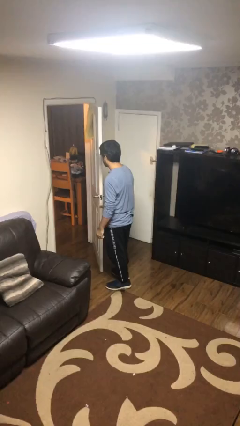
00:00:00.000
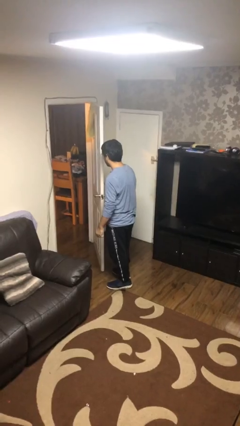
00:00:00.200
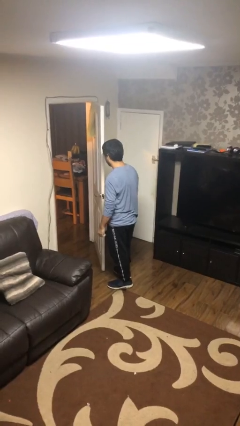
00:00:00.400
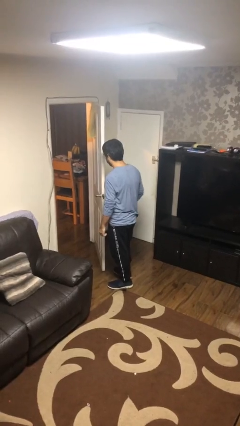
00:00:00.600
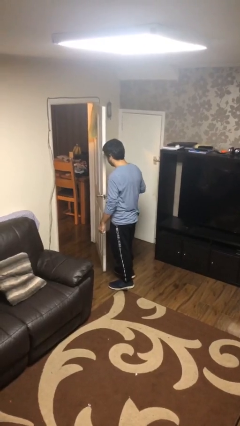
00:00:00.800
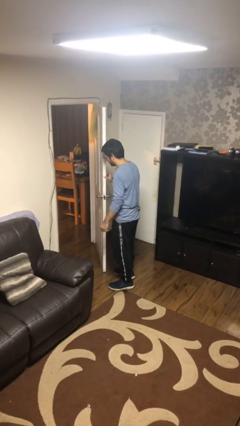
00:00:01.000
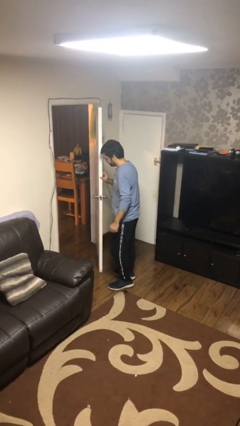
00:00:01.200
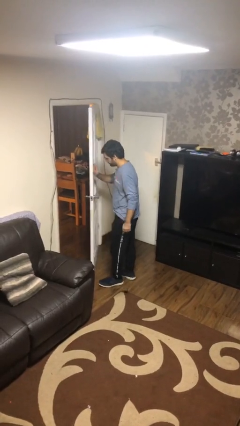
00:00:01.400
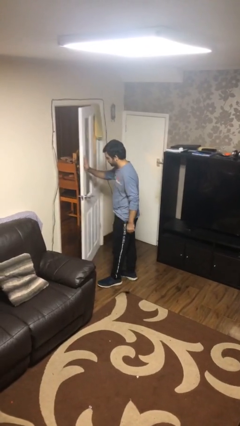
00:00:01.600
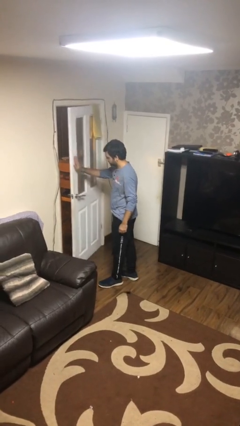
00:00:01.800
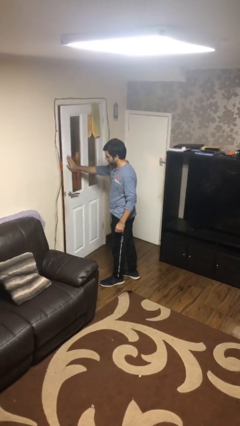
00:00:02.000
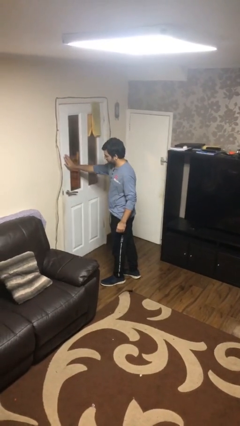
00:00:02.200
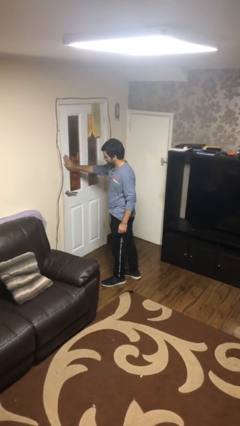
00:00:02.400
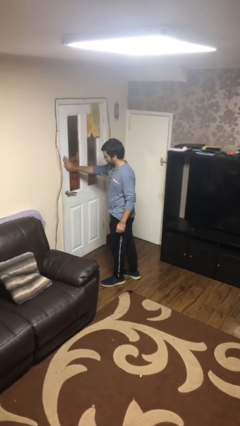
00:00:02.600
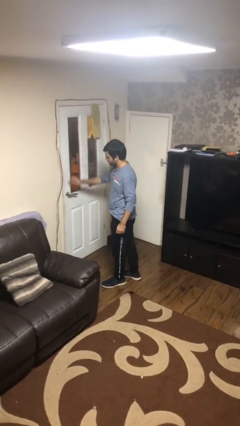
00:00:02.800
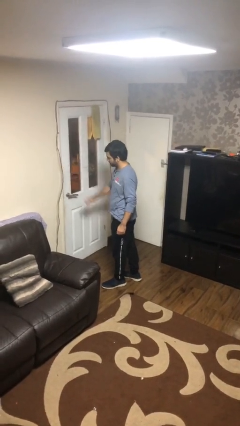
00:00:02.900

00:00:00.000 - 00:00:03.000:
person closes facility door

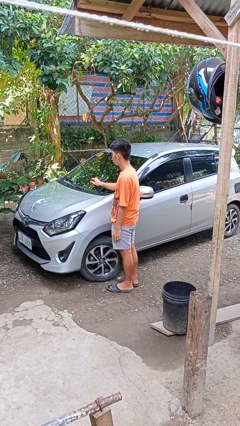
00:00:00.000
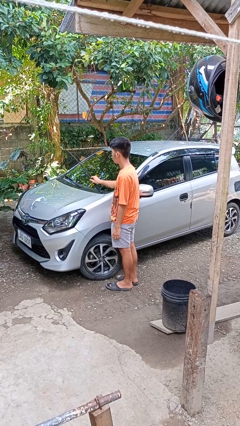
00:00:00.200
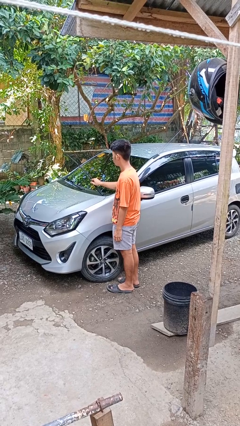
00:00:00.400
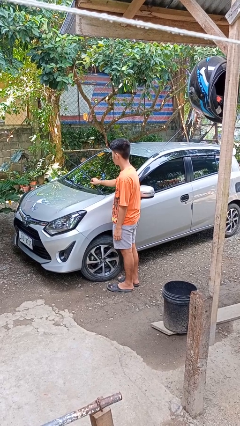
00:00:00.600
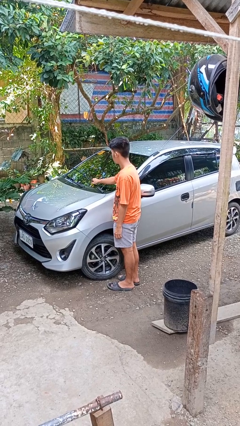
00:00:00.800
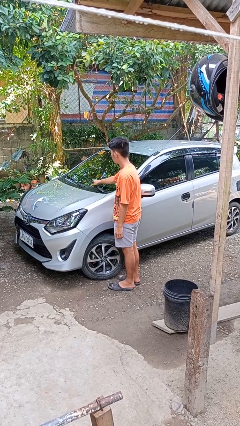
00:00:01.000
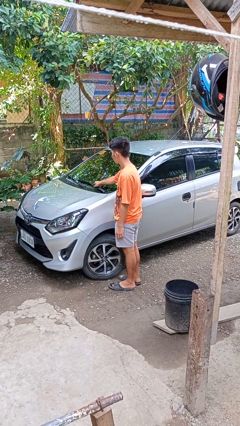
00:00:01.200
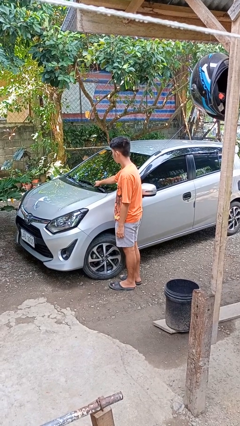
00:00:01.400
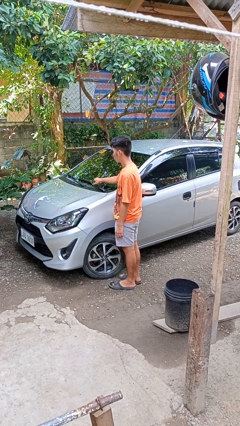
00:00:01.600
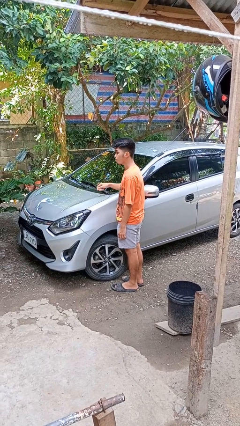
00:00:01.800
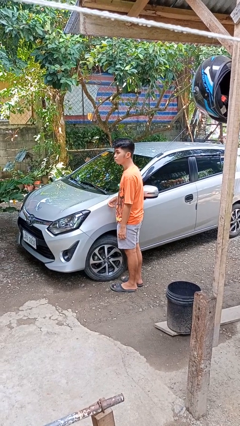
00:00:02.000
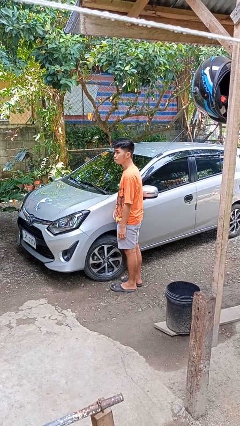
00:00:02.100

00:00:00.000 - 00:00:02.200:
person flips down car wipers

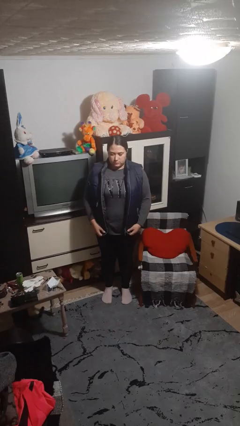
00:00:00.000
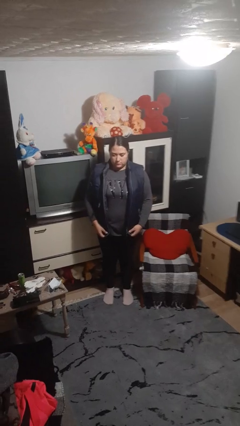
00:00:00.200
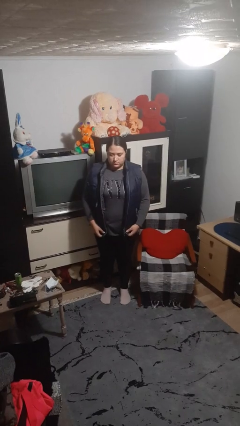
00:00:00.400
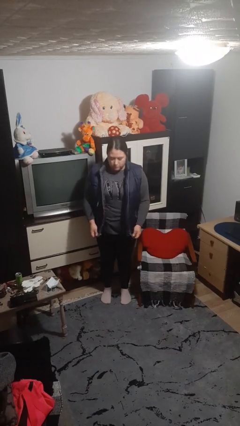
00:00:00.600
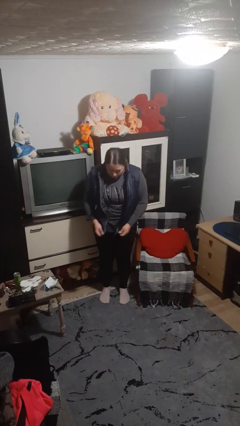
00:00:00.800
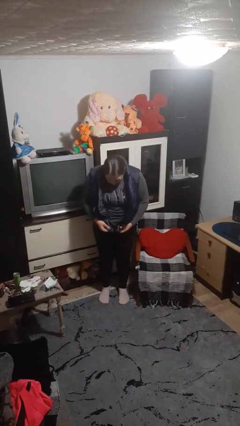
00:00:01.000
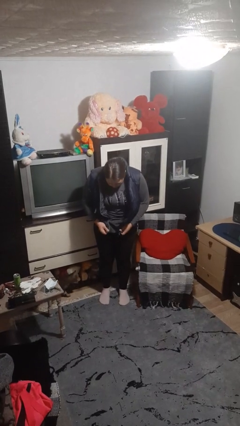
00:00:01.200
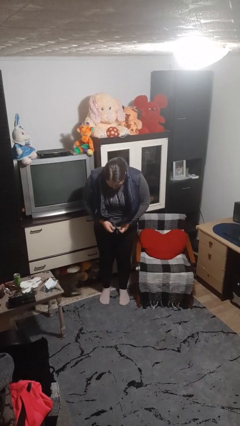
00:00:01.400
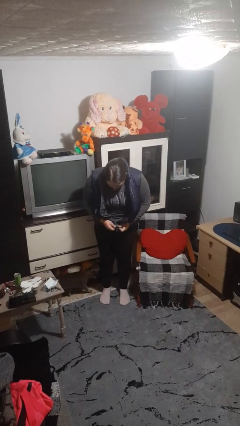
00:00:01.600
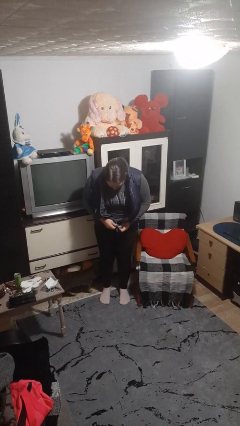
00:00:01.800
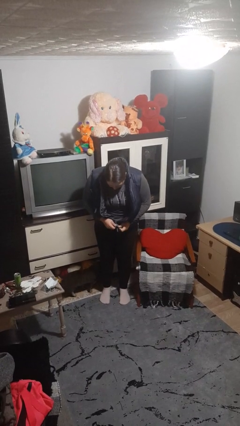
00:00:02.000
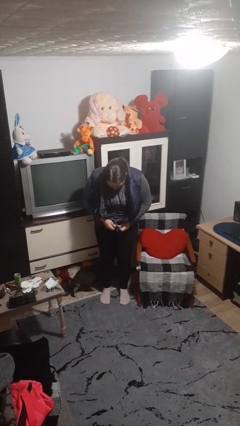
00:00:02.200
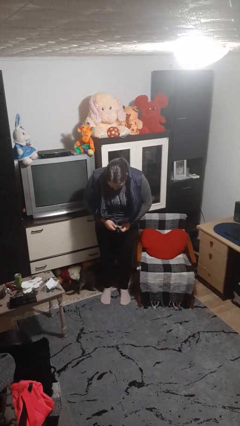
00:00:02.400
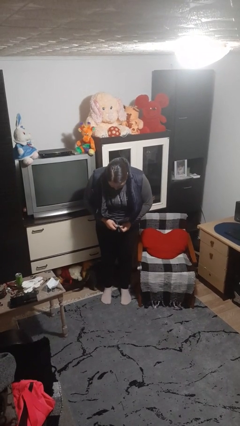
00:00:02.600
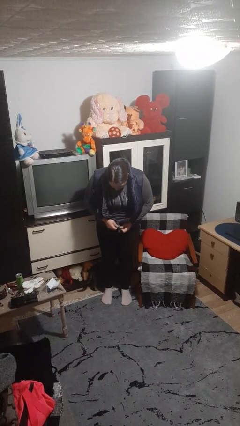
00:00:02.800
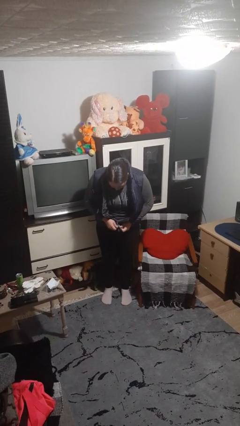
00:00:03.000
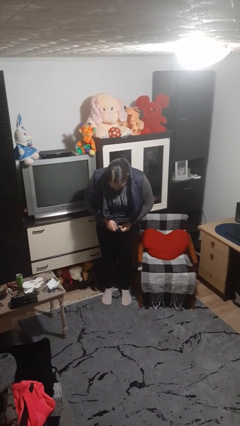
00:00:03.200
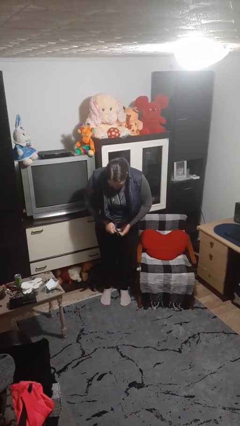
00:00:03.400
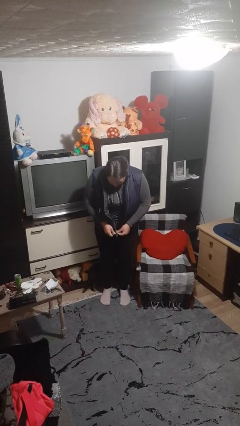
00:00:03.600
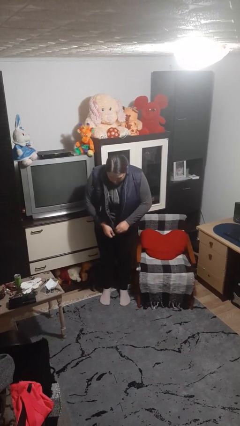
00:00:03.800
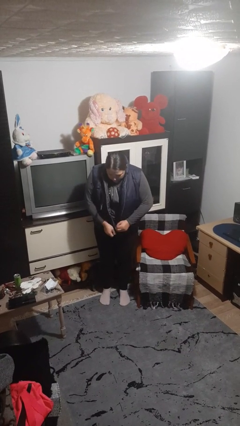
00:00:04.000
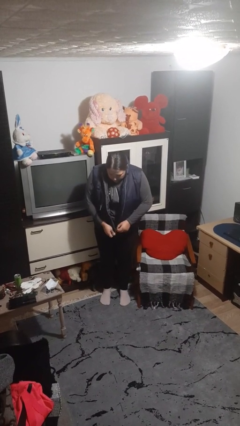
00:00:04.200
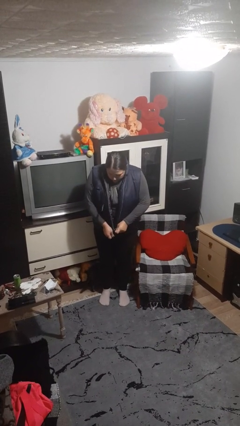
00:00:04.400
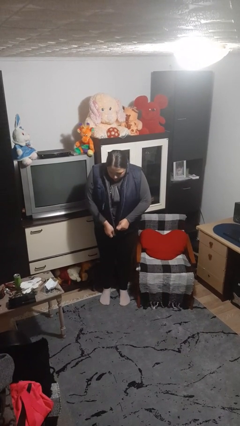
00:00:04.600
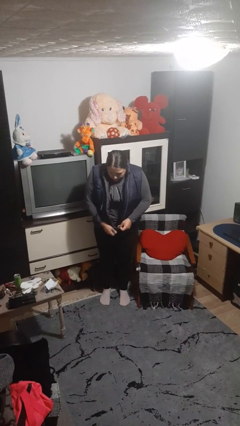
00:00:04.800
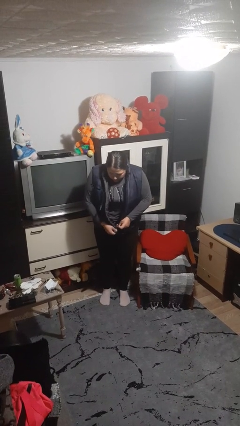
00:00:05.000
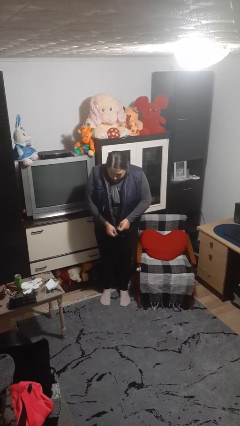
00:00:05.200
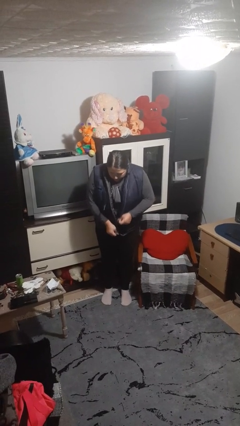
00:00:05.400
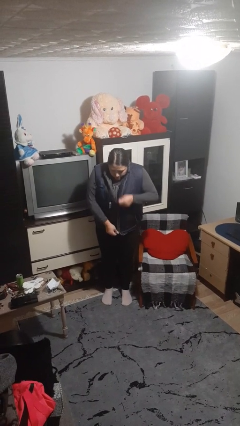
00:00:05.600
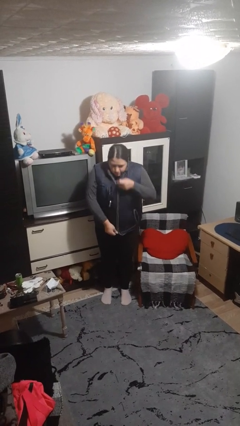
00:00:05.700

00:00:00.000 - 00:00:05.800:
person zips up jacket

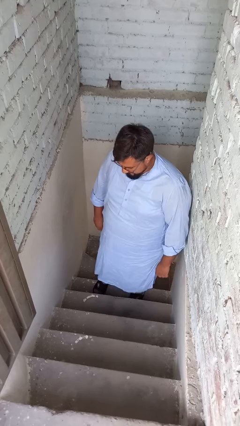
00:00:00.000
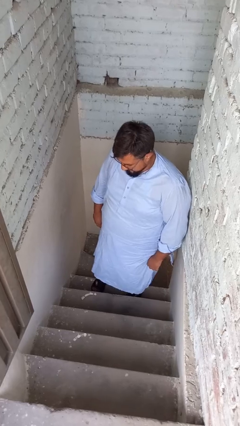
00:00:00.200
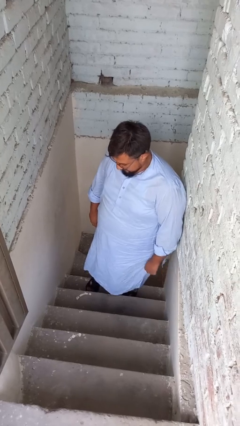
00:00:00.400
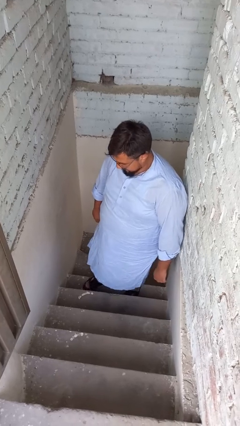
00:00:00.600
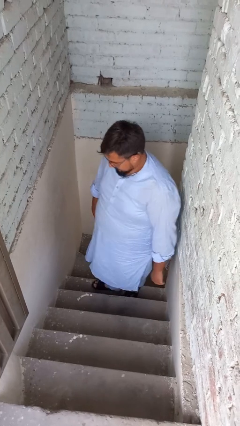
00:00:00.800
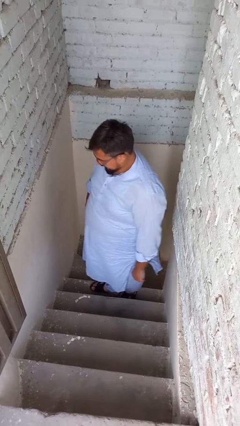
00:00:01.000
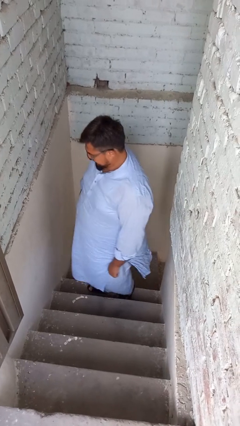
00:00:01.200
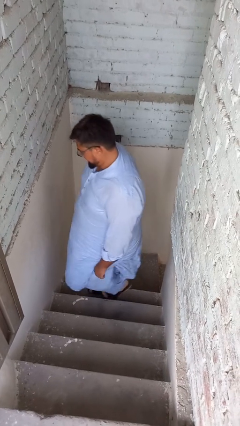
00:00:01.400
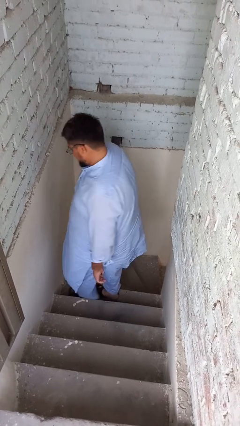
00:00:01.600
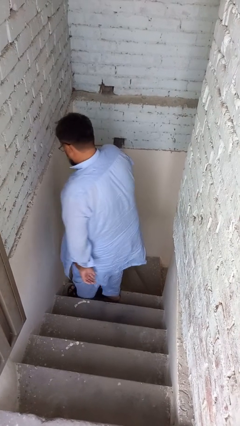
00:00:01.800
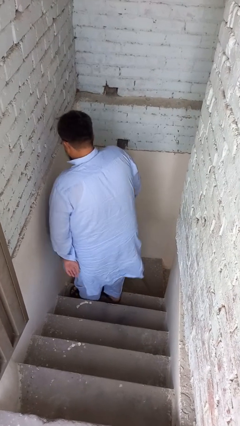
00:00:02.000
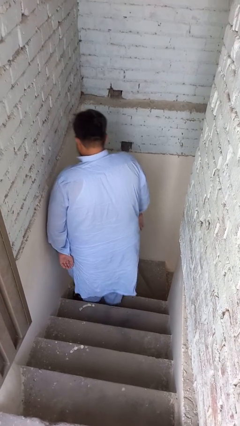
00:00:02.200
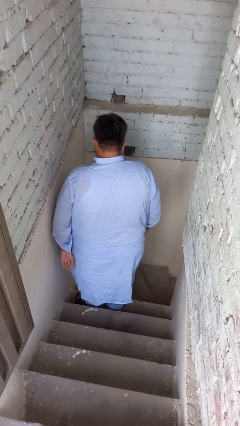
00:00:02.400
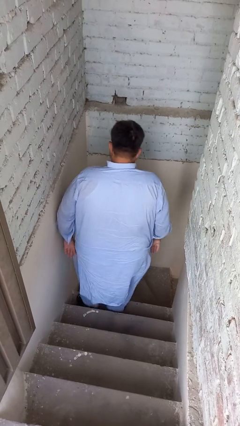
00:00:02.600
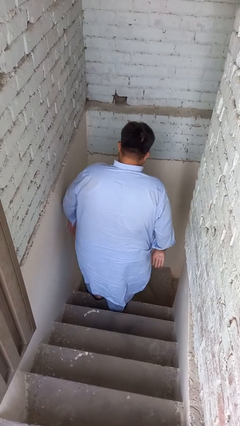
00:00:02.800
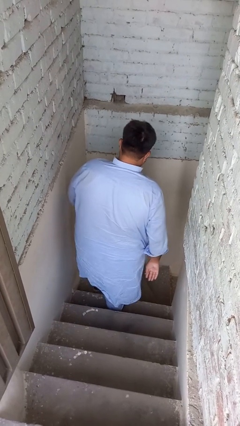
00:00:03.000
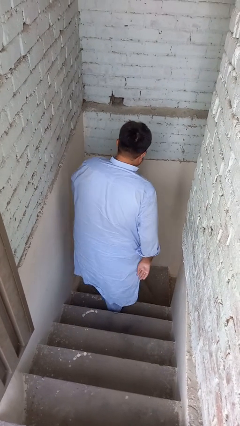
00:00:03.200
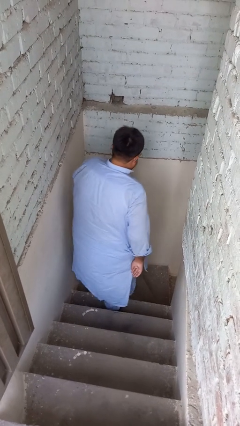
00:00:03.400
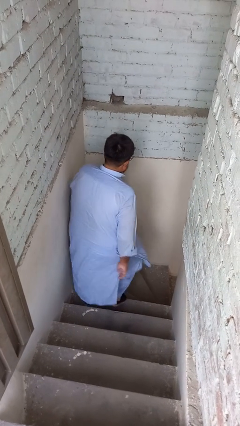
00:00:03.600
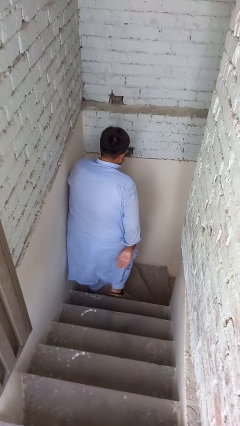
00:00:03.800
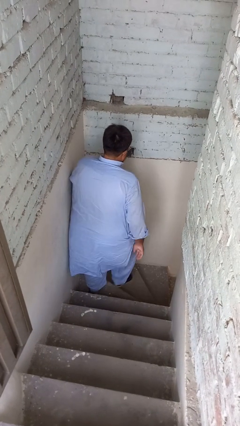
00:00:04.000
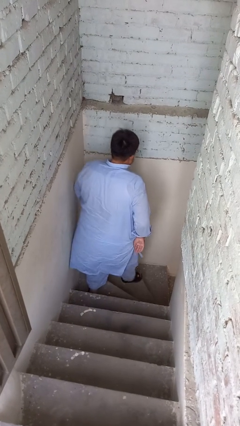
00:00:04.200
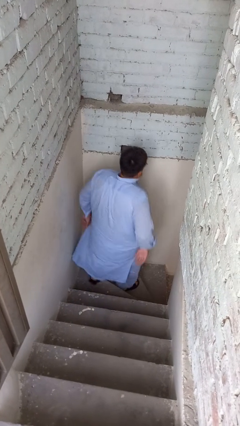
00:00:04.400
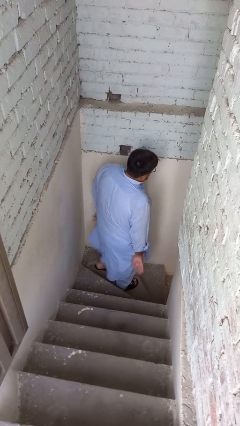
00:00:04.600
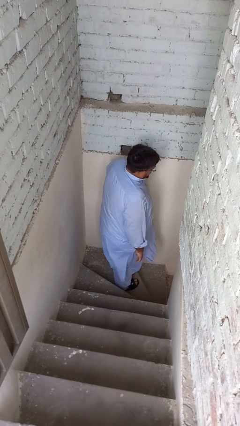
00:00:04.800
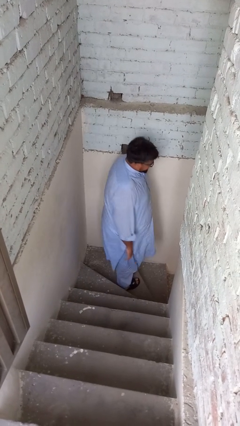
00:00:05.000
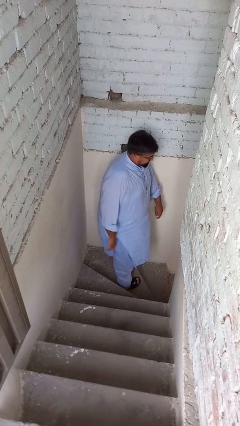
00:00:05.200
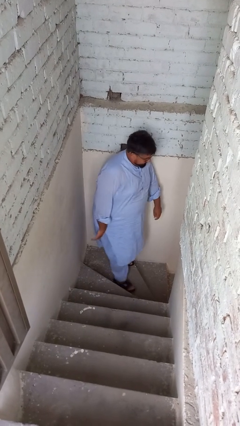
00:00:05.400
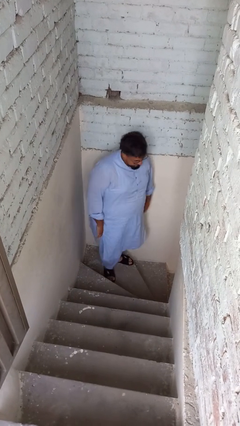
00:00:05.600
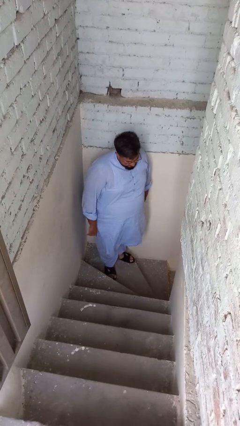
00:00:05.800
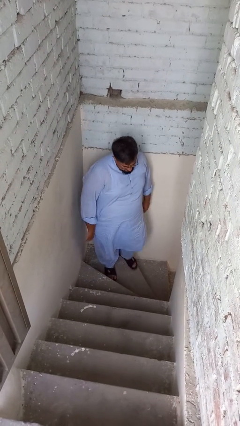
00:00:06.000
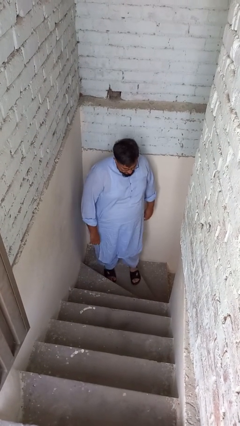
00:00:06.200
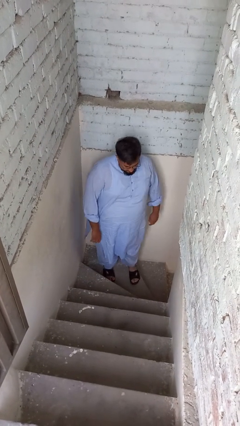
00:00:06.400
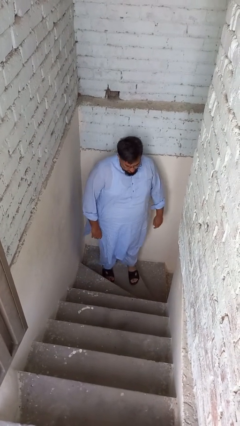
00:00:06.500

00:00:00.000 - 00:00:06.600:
person climbs down stairs

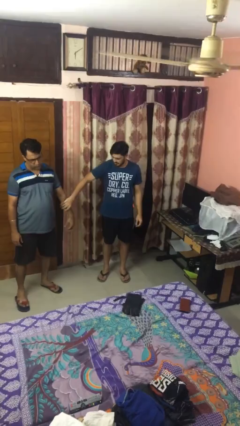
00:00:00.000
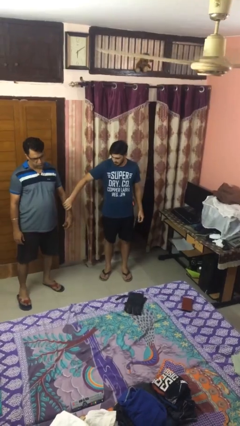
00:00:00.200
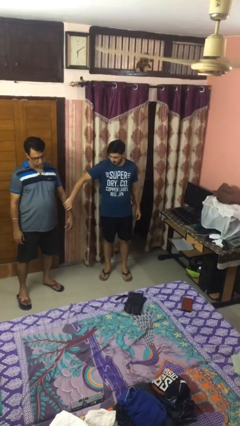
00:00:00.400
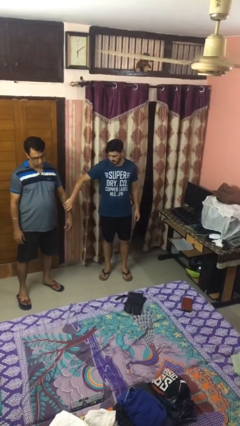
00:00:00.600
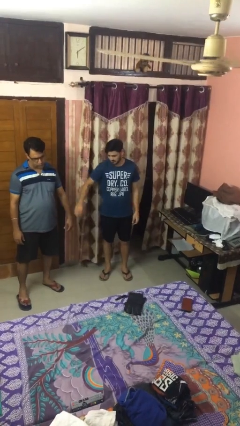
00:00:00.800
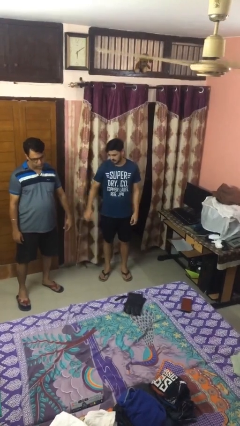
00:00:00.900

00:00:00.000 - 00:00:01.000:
person grabs person by forearm
